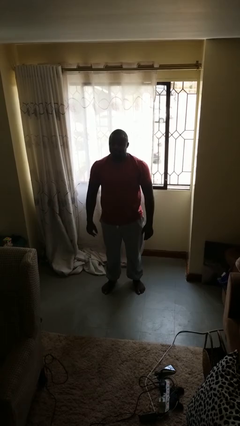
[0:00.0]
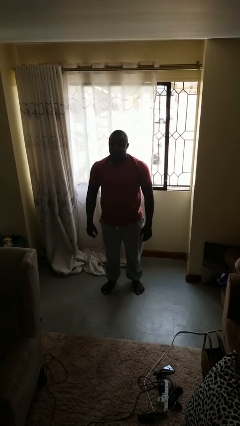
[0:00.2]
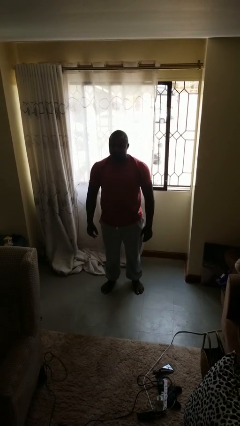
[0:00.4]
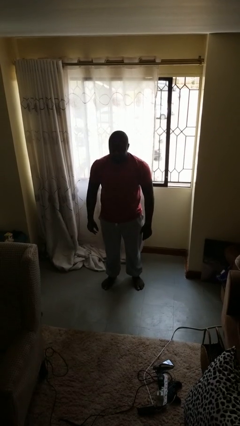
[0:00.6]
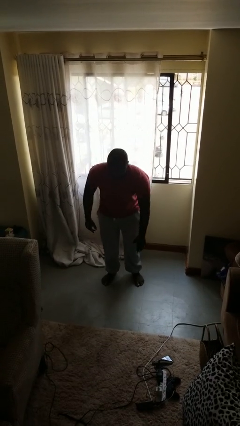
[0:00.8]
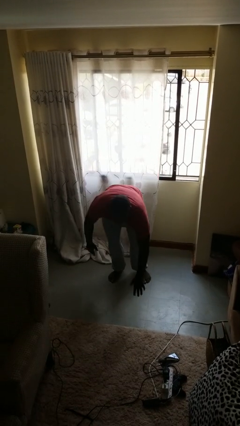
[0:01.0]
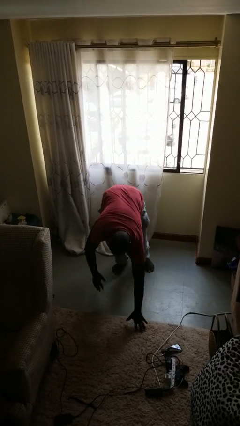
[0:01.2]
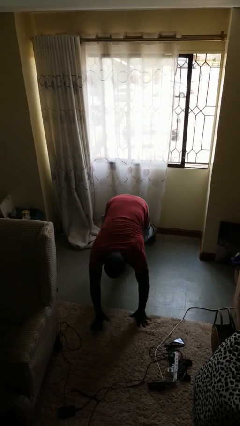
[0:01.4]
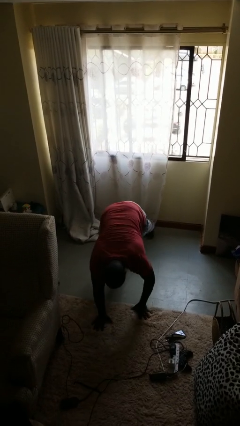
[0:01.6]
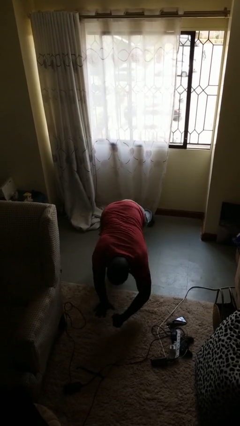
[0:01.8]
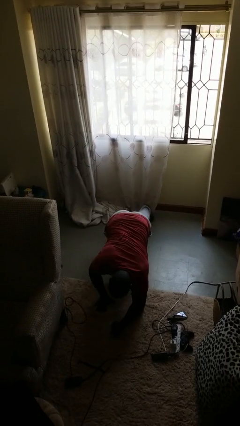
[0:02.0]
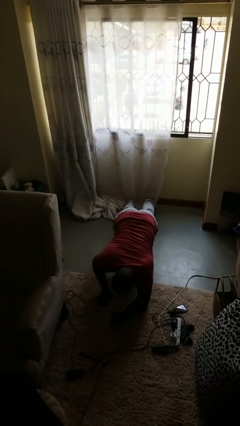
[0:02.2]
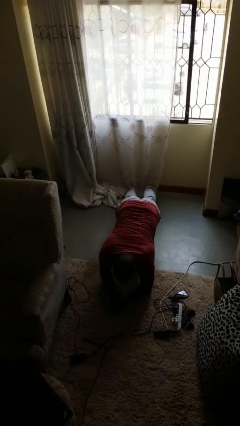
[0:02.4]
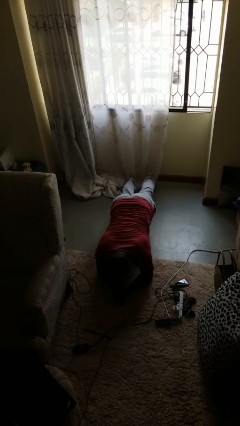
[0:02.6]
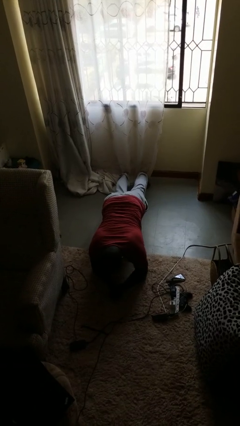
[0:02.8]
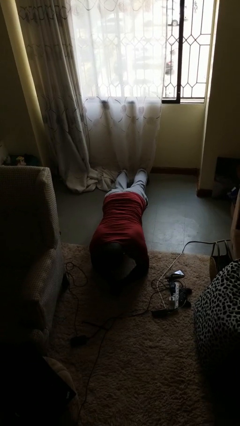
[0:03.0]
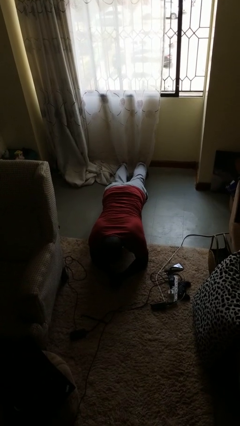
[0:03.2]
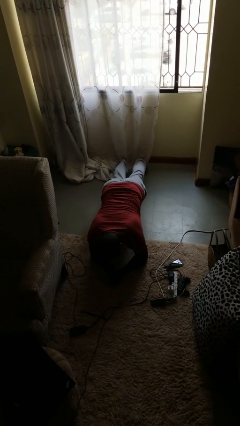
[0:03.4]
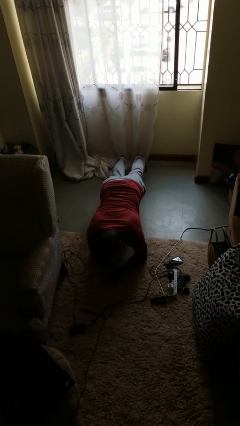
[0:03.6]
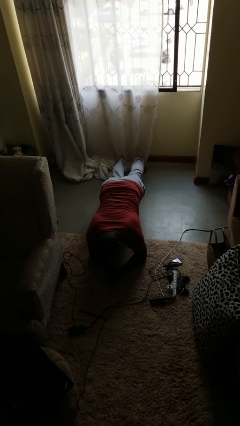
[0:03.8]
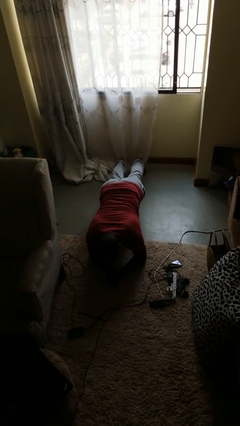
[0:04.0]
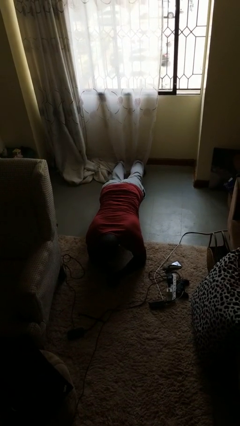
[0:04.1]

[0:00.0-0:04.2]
person exercises with plank

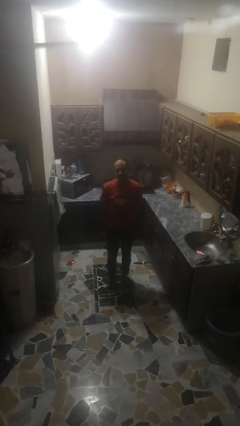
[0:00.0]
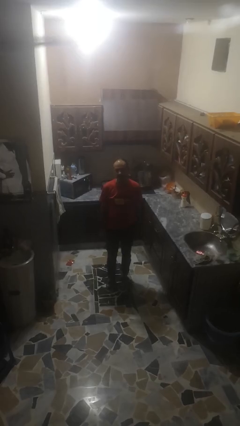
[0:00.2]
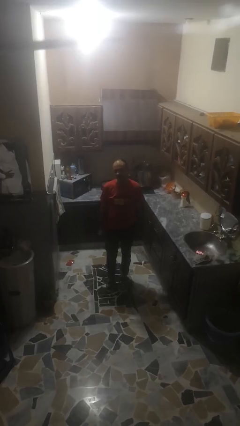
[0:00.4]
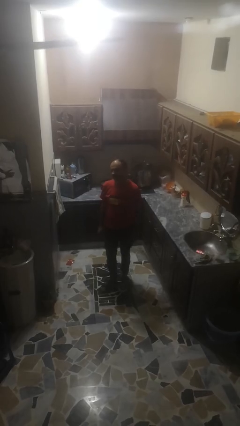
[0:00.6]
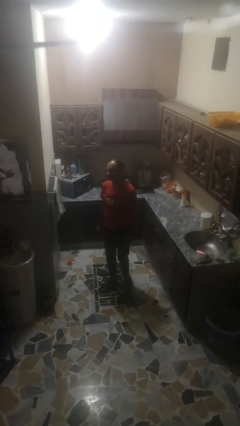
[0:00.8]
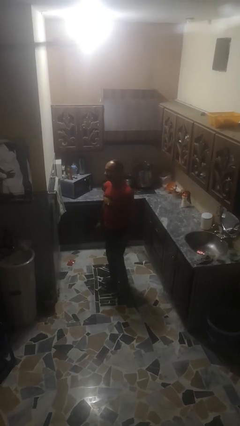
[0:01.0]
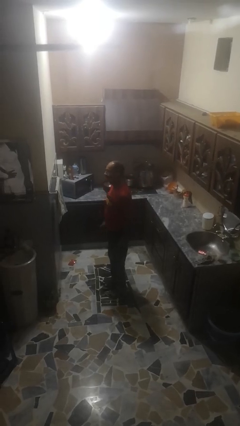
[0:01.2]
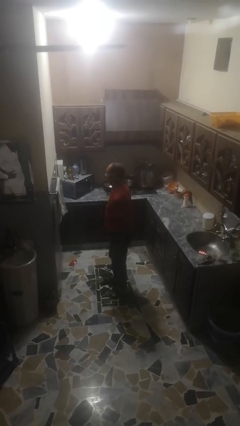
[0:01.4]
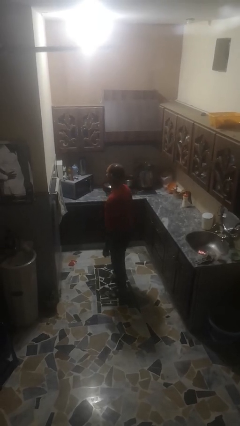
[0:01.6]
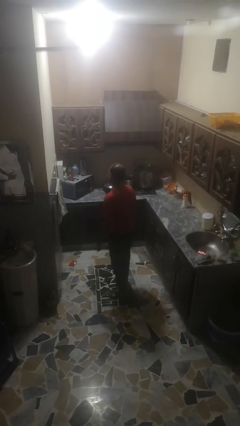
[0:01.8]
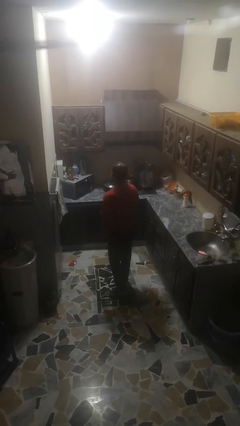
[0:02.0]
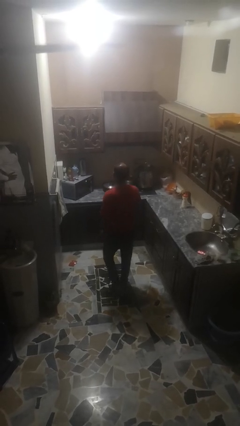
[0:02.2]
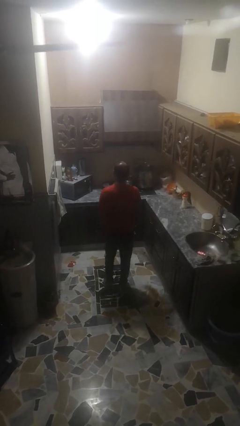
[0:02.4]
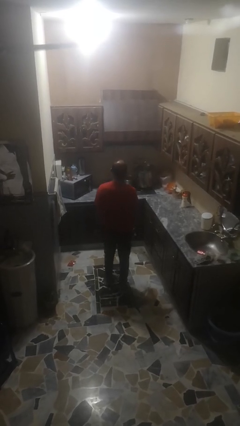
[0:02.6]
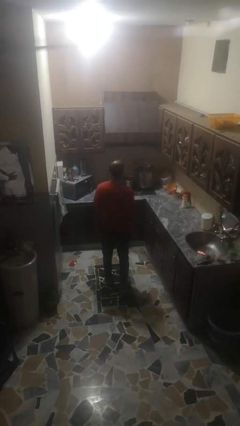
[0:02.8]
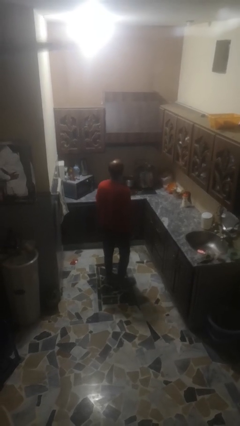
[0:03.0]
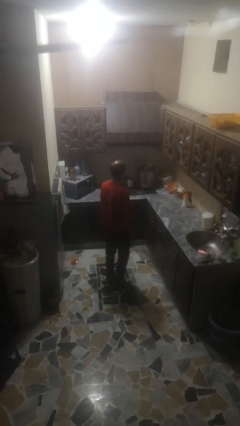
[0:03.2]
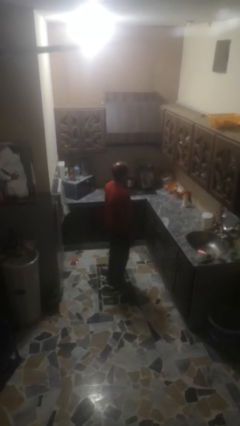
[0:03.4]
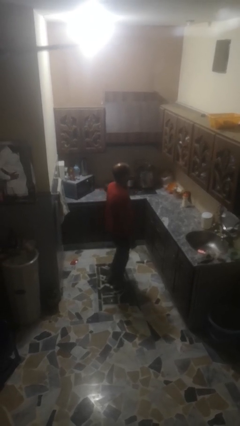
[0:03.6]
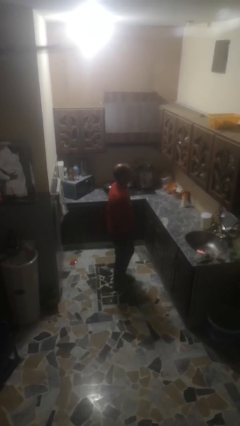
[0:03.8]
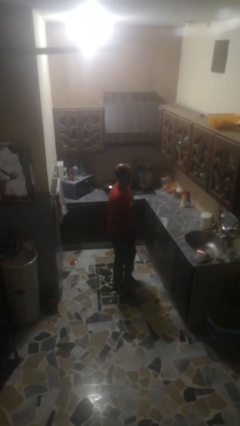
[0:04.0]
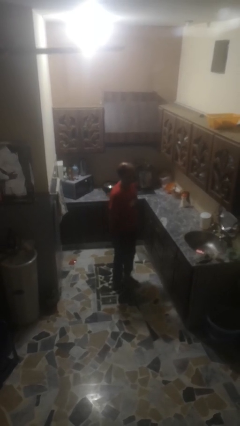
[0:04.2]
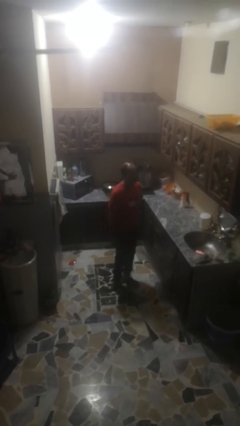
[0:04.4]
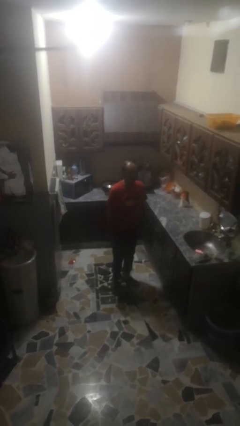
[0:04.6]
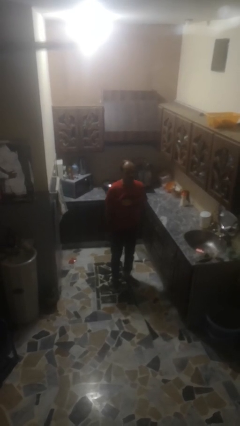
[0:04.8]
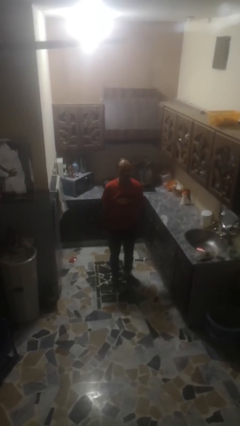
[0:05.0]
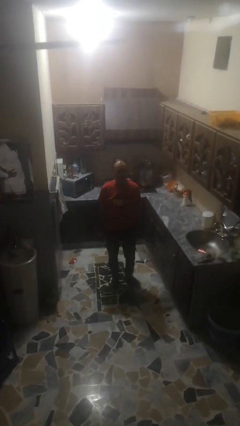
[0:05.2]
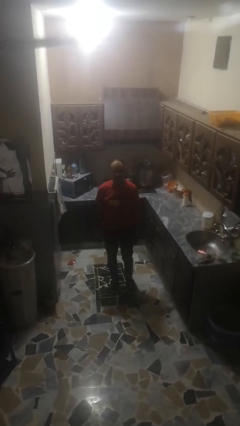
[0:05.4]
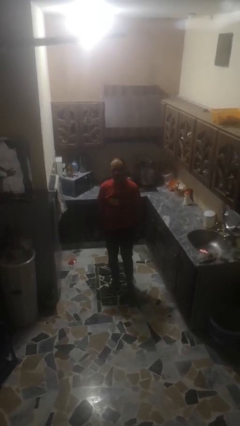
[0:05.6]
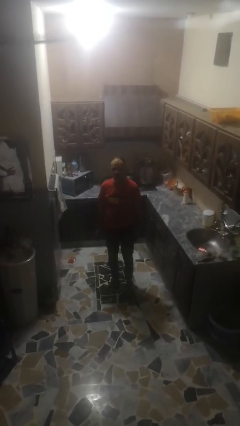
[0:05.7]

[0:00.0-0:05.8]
person twirls

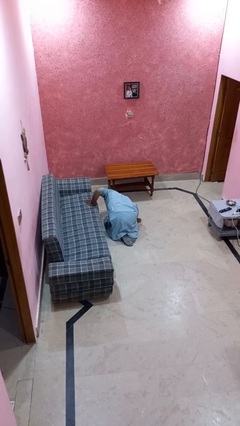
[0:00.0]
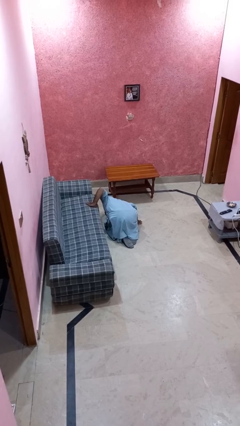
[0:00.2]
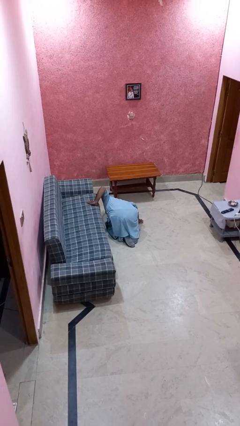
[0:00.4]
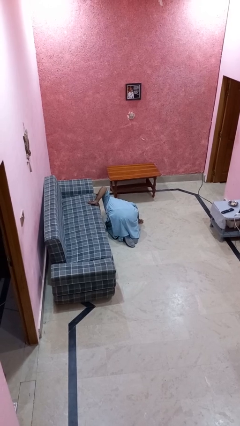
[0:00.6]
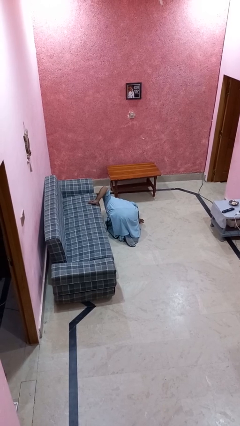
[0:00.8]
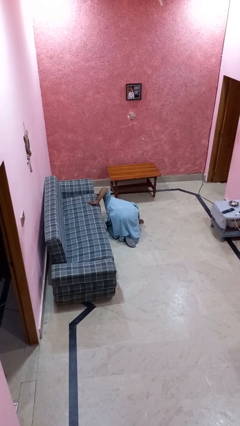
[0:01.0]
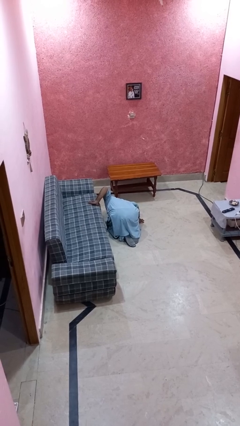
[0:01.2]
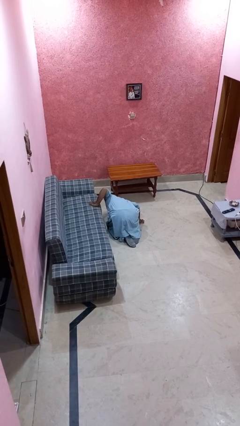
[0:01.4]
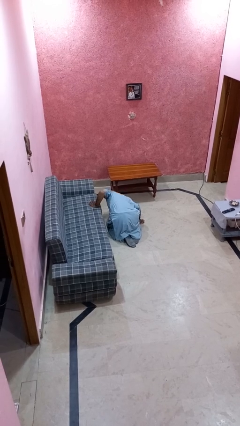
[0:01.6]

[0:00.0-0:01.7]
person searches under couch

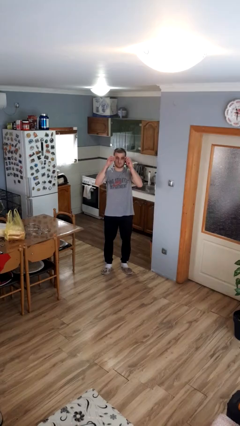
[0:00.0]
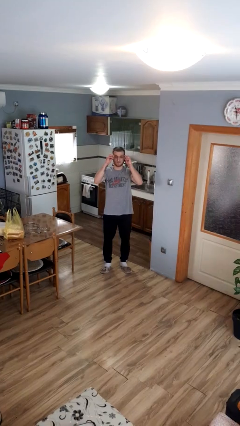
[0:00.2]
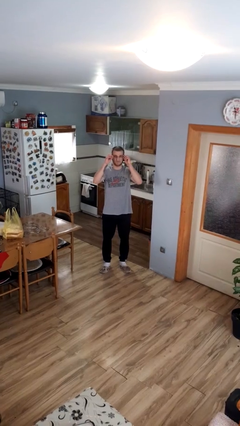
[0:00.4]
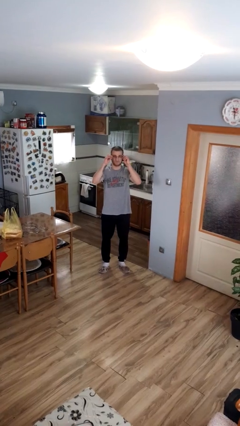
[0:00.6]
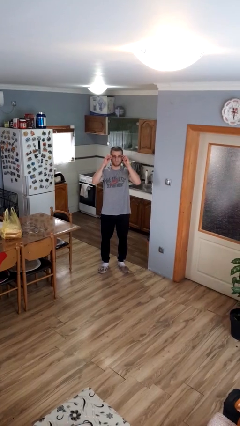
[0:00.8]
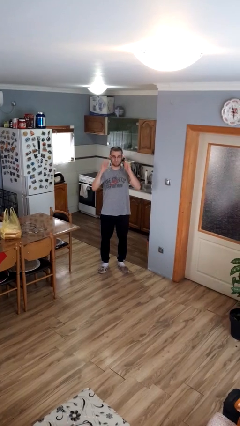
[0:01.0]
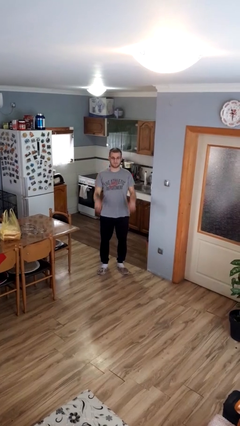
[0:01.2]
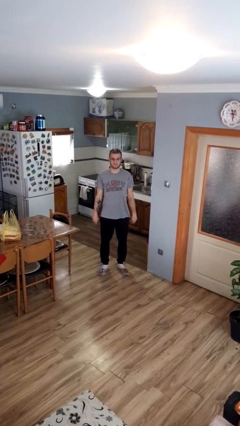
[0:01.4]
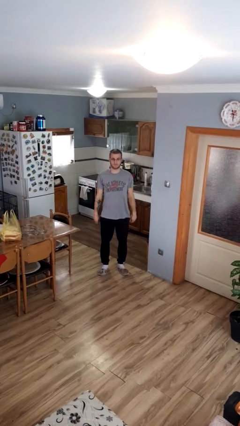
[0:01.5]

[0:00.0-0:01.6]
person puts on glasses

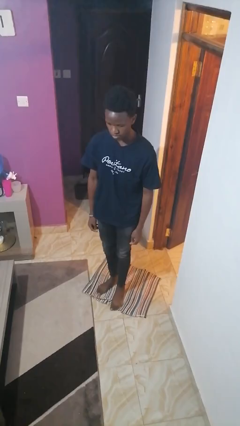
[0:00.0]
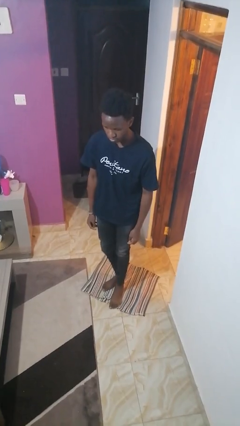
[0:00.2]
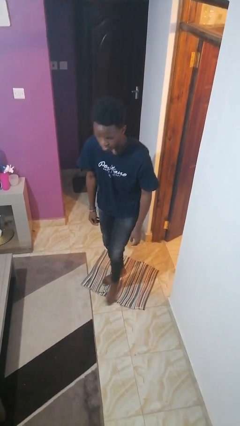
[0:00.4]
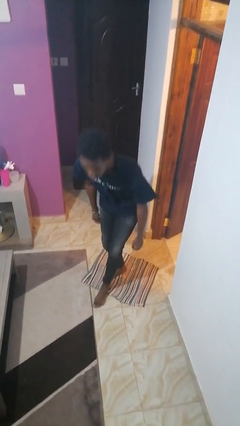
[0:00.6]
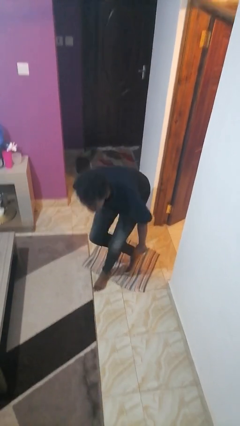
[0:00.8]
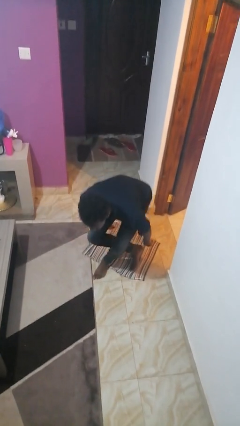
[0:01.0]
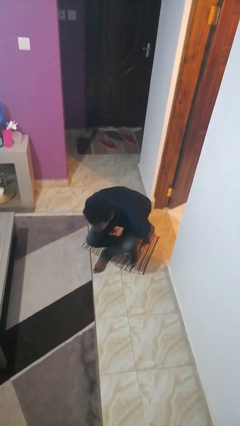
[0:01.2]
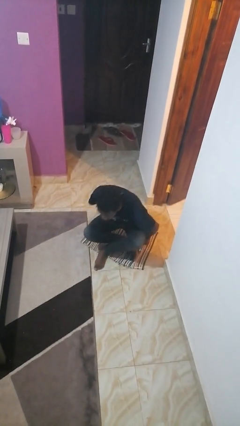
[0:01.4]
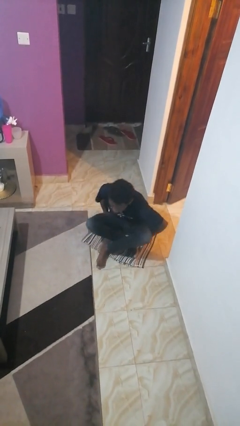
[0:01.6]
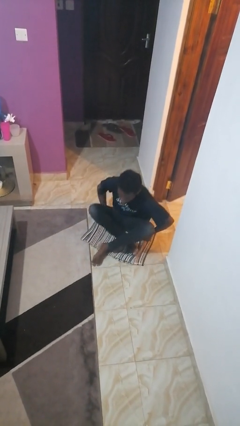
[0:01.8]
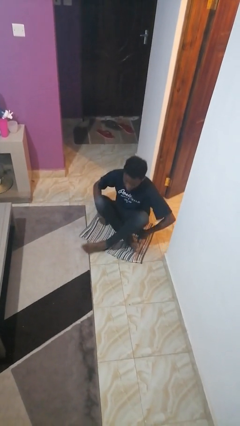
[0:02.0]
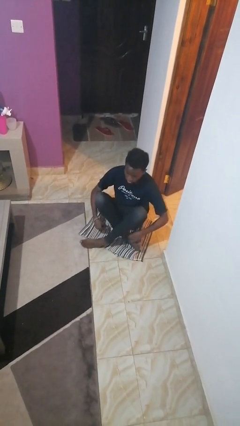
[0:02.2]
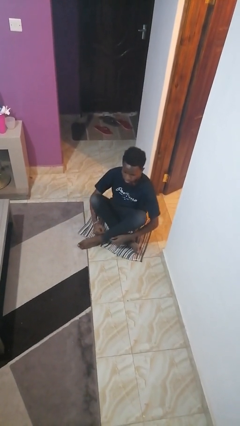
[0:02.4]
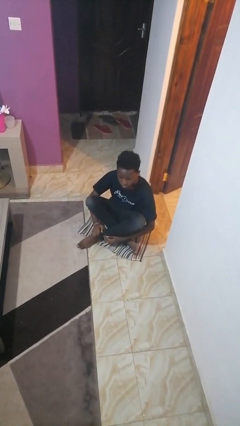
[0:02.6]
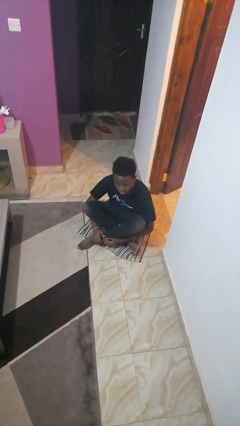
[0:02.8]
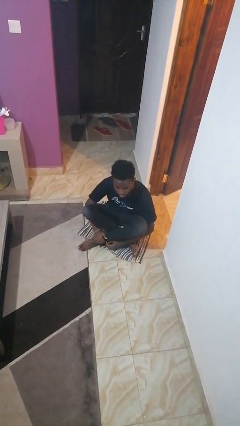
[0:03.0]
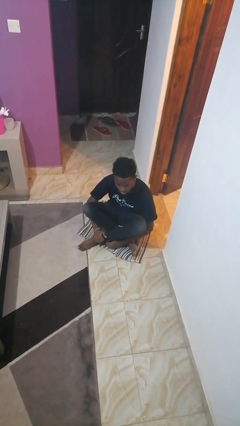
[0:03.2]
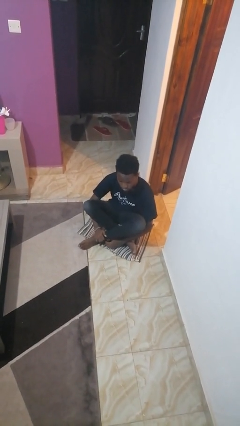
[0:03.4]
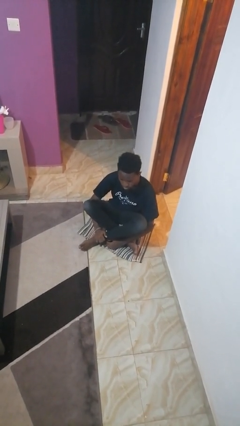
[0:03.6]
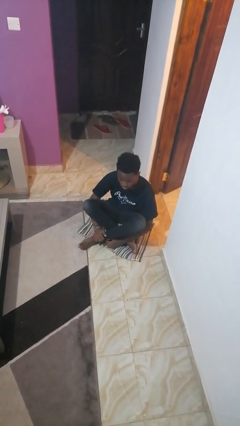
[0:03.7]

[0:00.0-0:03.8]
person sits crisscross

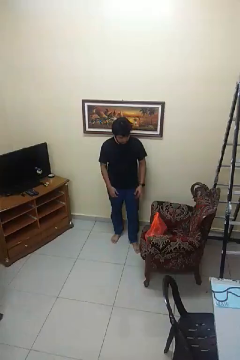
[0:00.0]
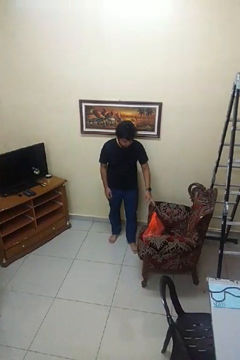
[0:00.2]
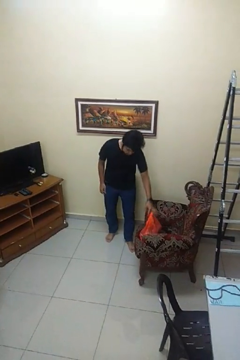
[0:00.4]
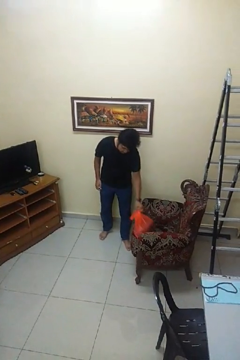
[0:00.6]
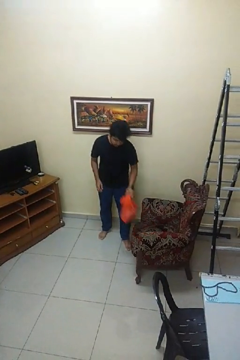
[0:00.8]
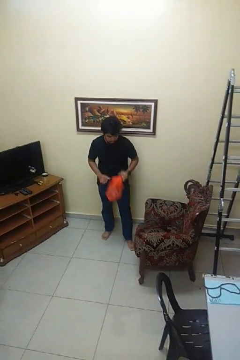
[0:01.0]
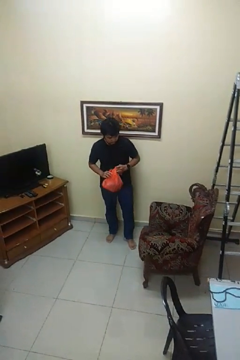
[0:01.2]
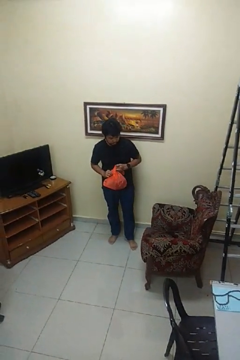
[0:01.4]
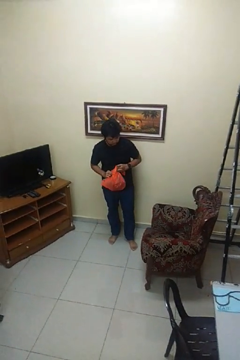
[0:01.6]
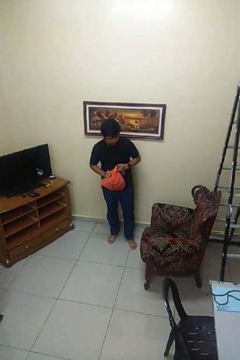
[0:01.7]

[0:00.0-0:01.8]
person picks up object from couch